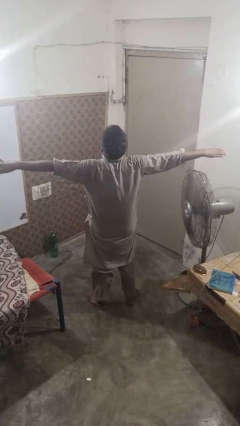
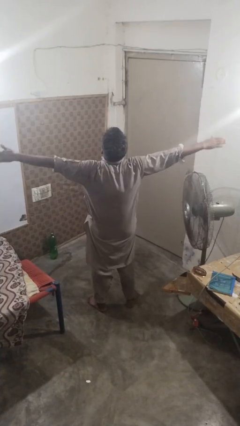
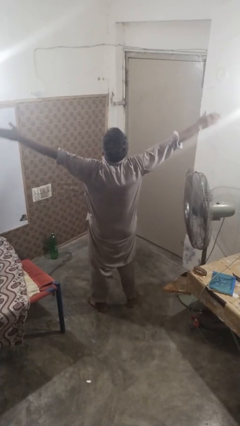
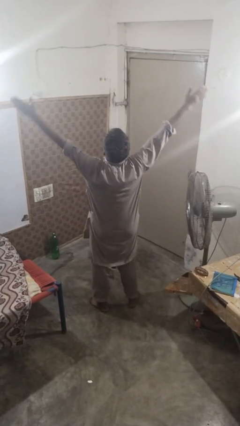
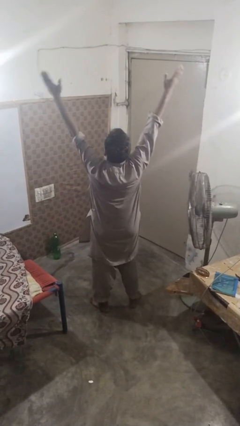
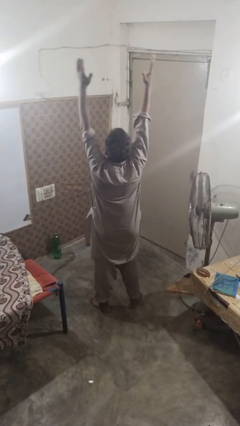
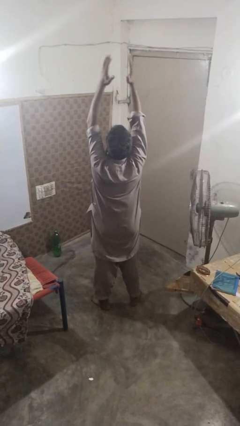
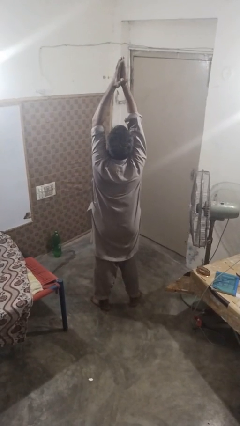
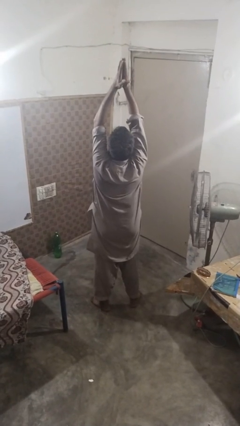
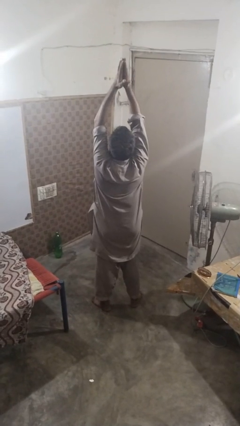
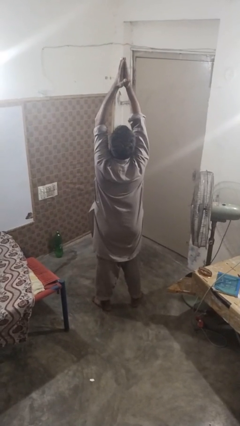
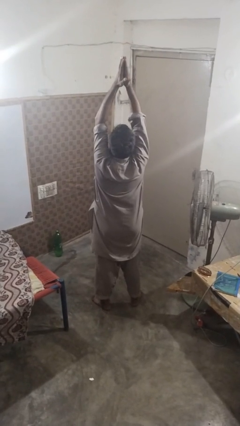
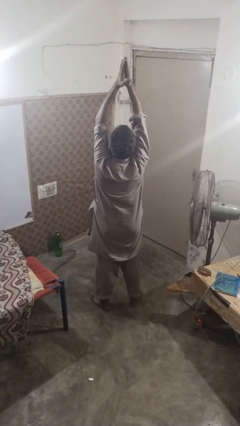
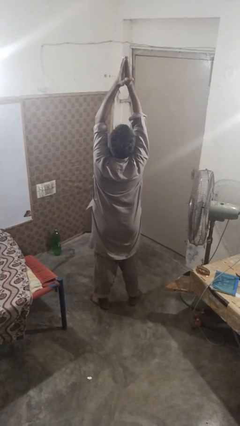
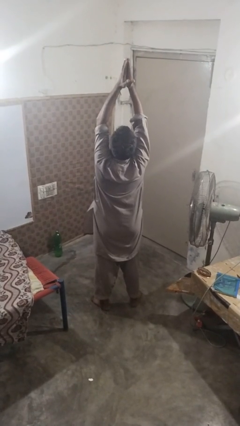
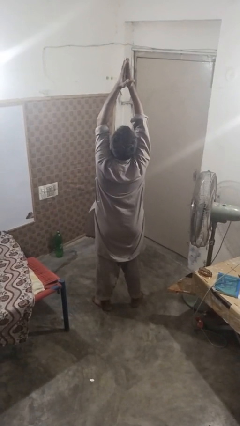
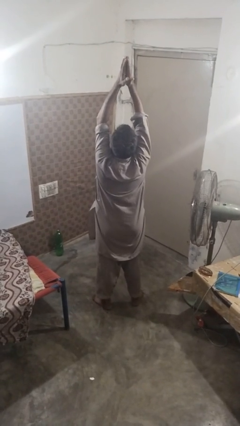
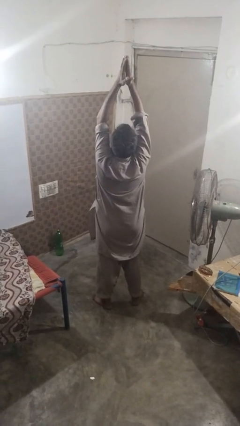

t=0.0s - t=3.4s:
person stretches arms over head

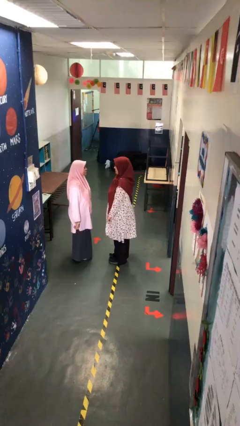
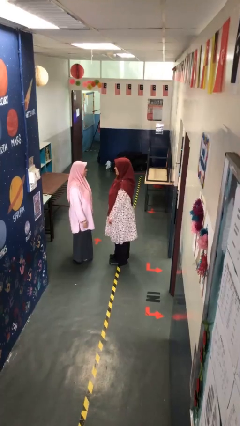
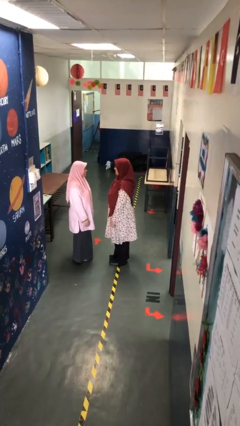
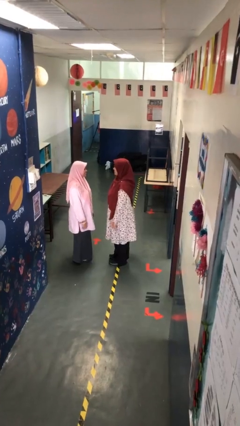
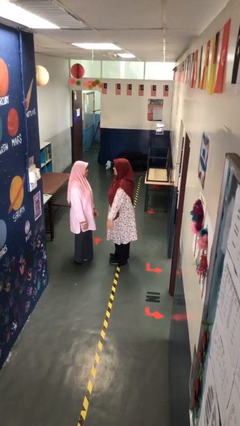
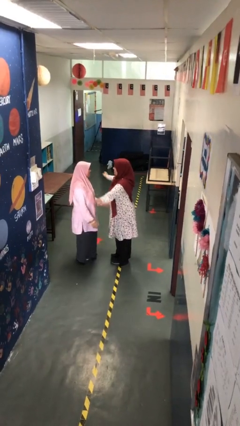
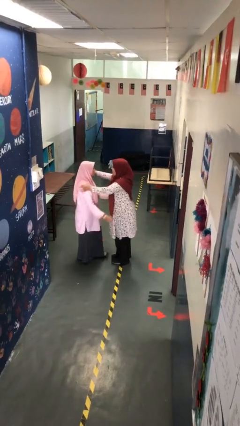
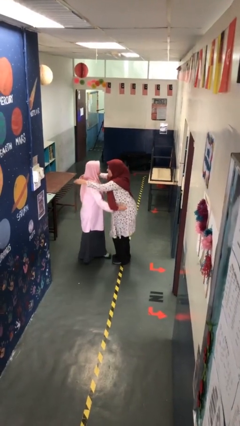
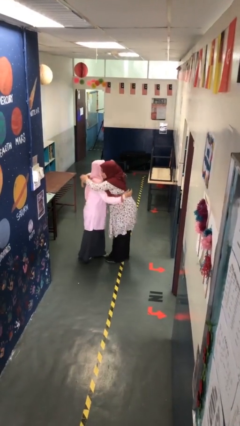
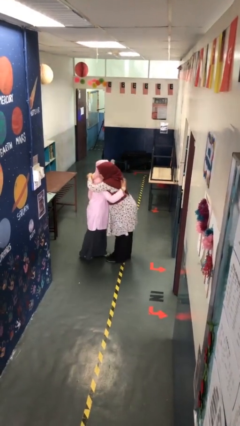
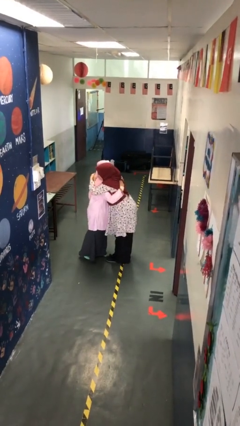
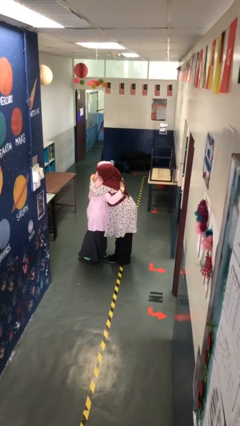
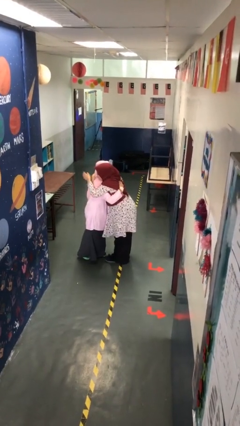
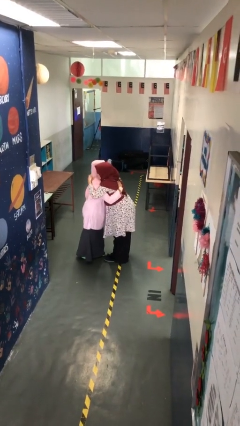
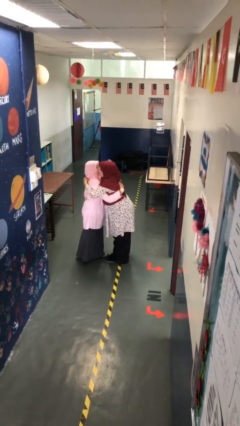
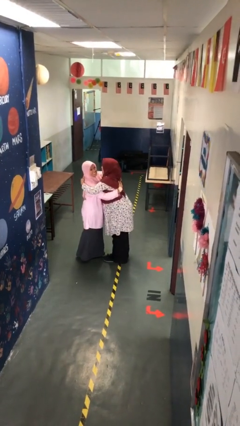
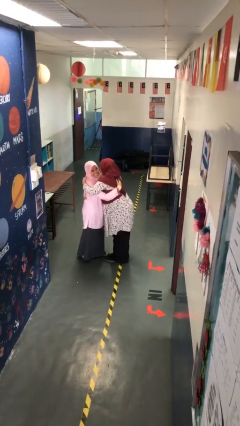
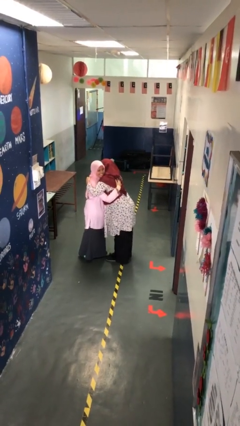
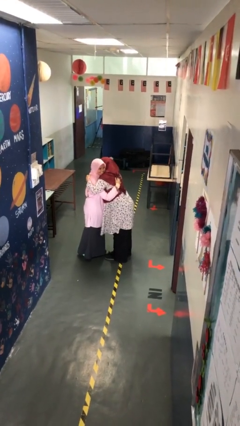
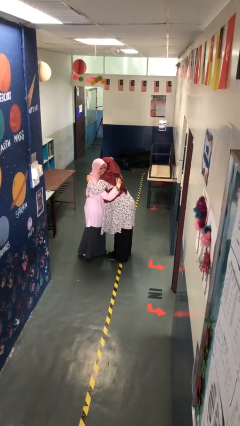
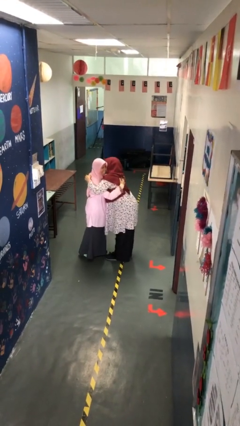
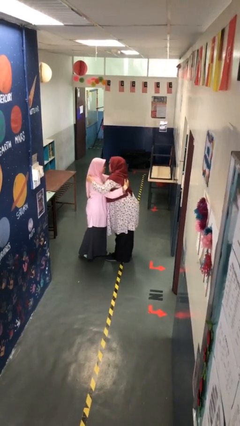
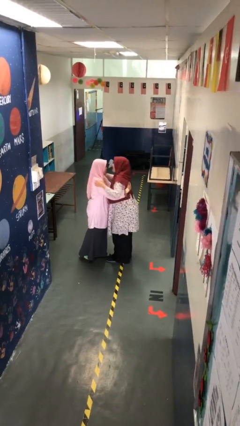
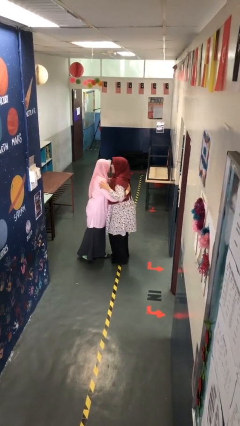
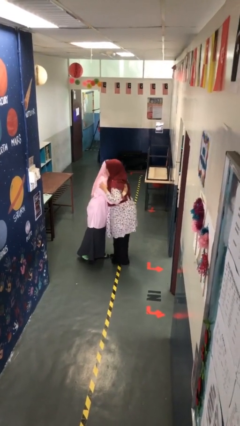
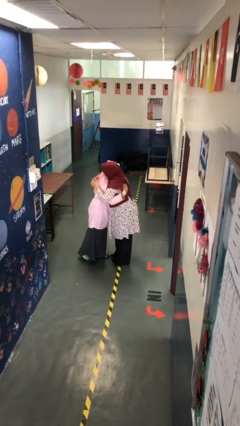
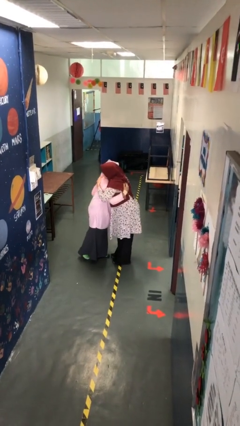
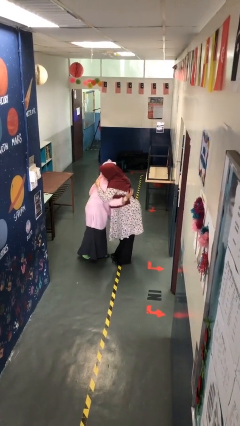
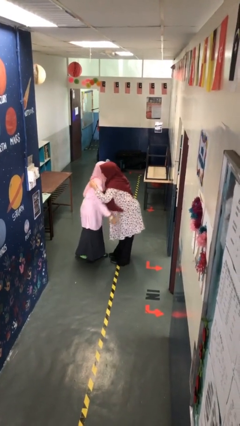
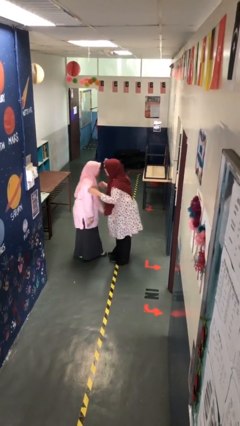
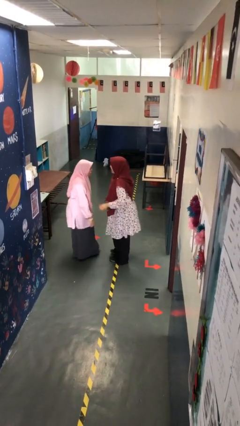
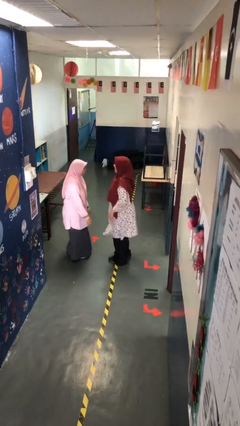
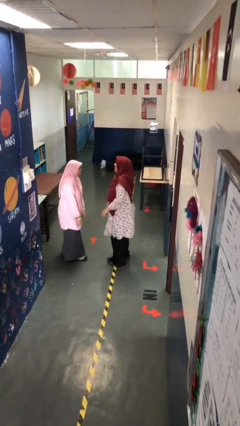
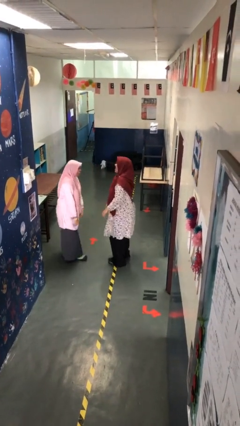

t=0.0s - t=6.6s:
person embraces person

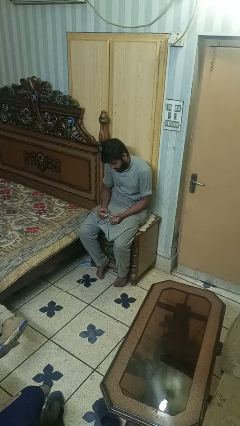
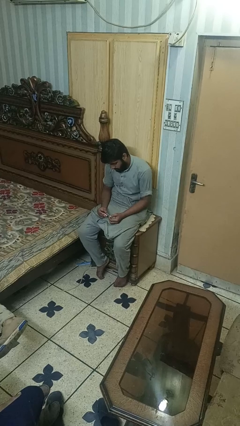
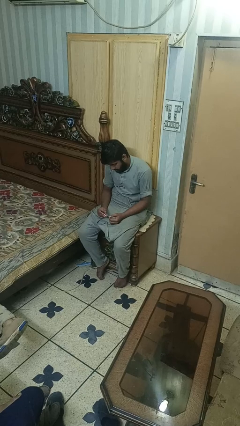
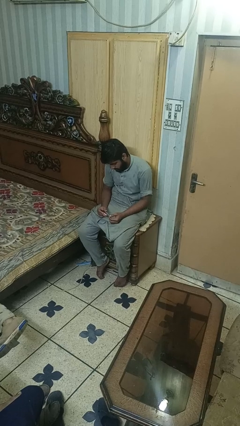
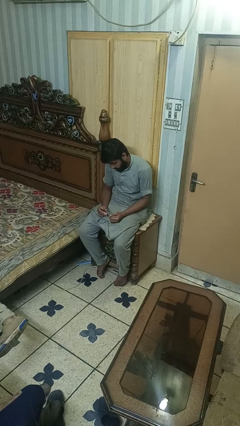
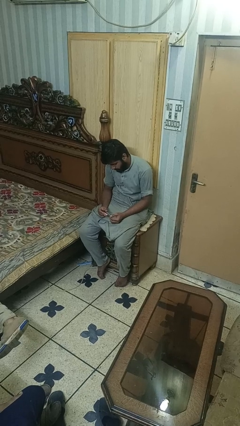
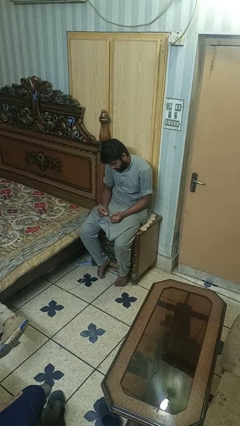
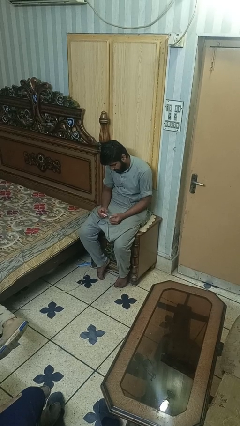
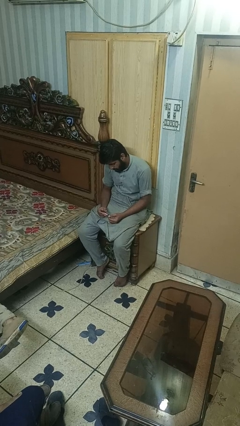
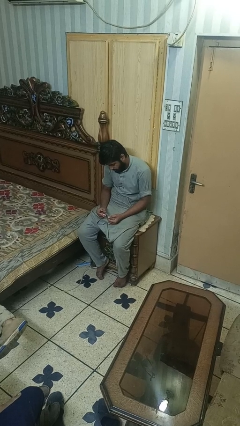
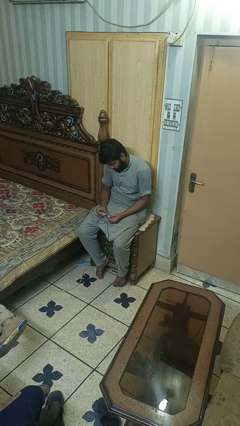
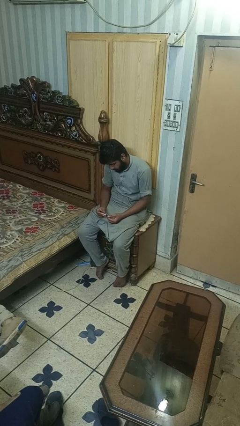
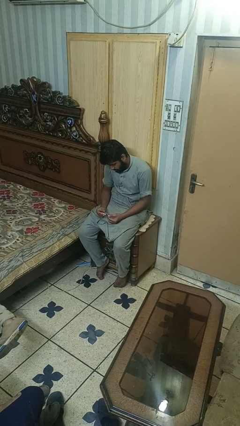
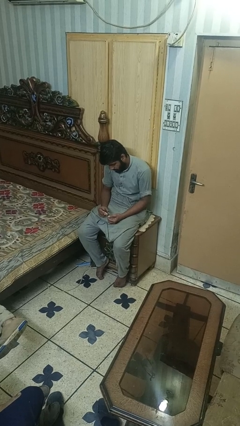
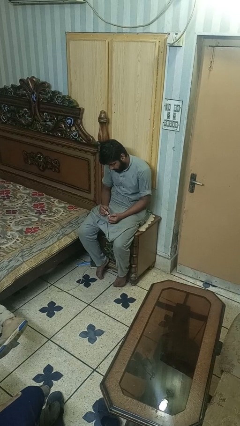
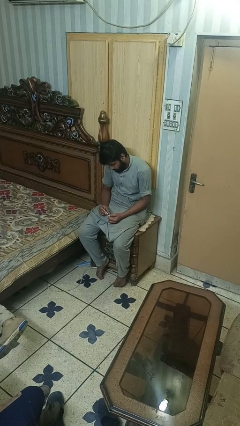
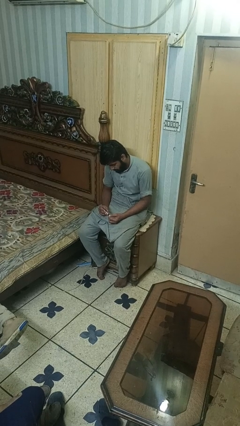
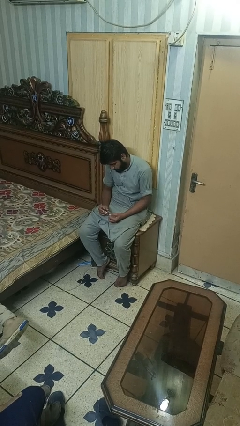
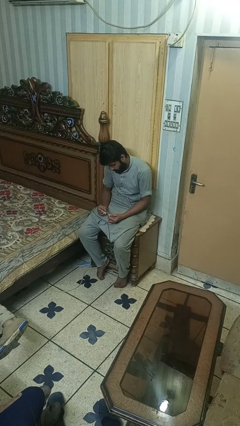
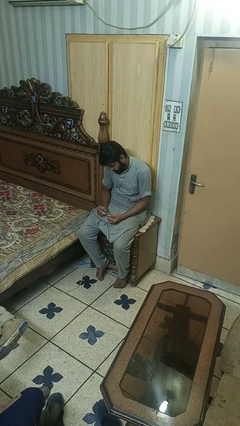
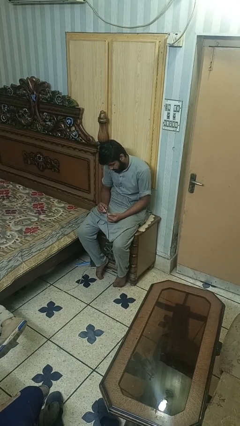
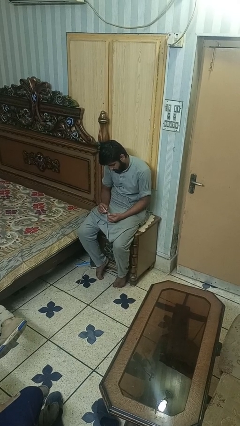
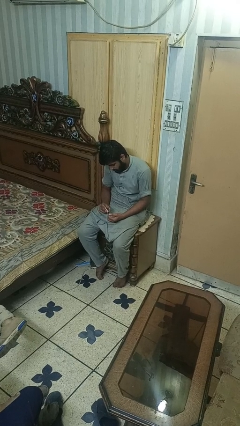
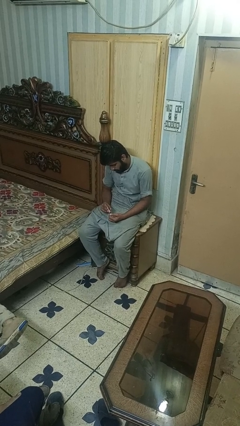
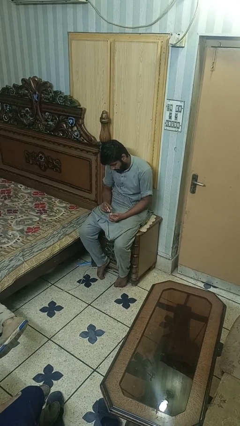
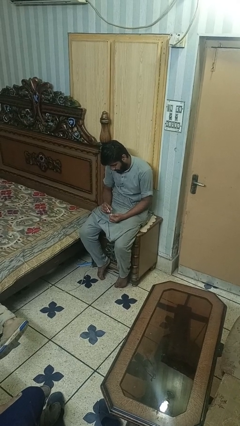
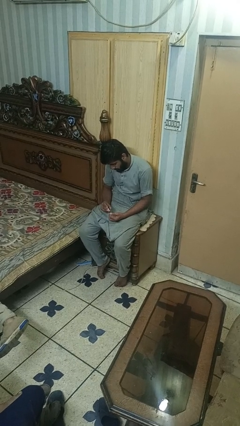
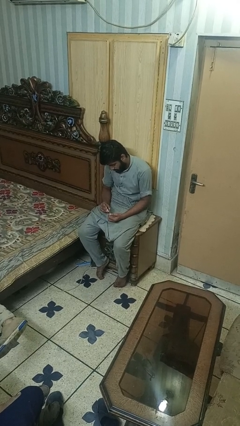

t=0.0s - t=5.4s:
person clips fingernails

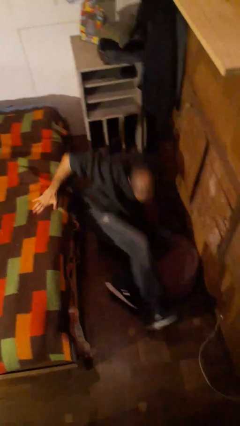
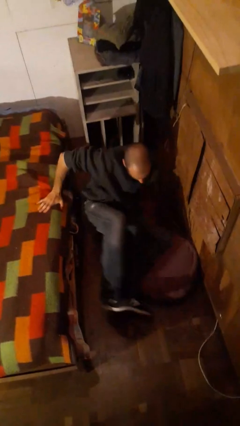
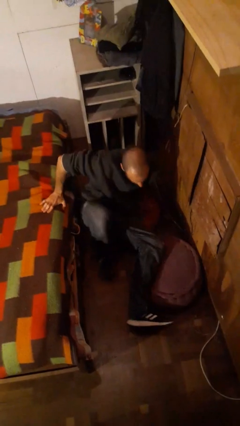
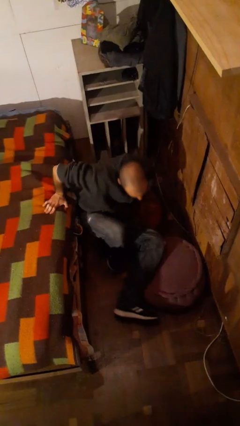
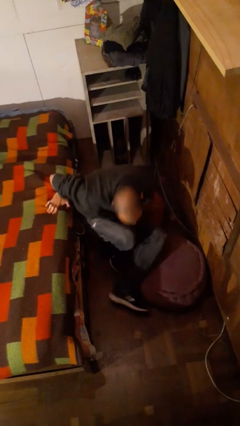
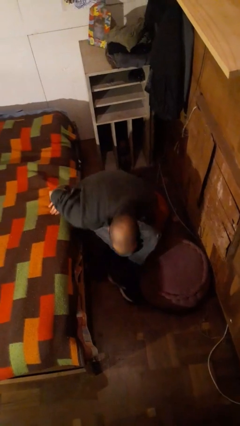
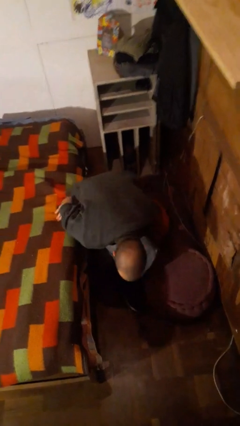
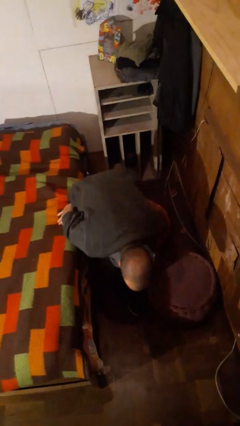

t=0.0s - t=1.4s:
person falls from bed

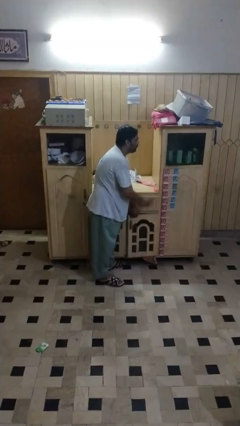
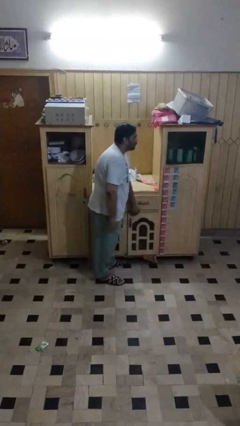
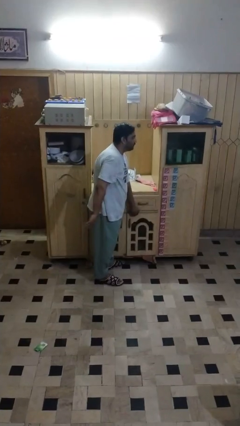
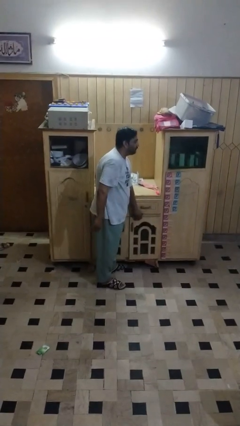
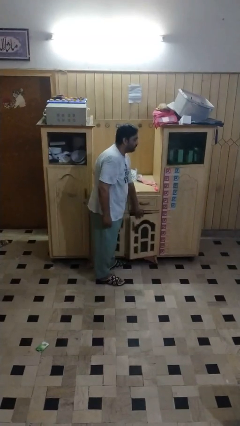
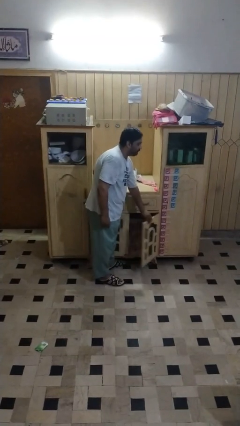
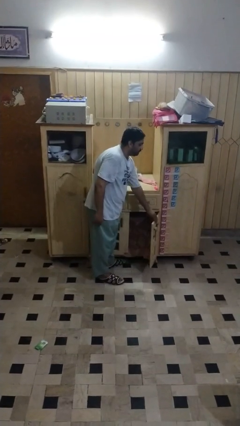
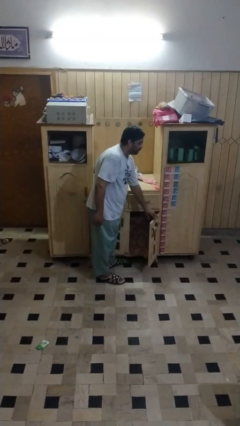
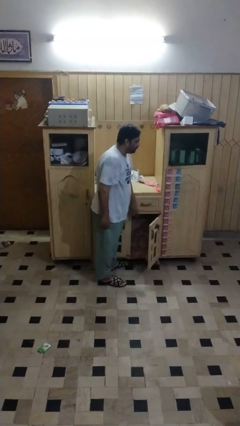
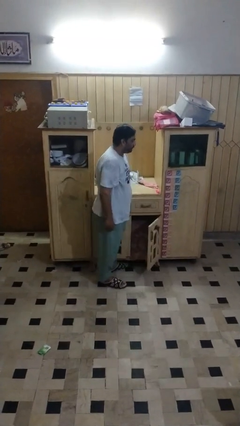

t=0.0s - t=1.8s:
person closes cabinet
